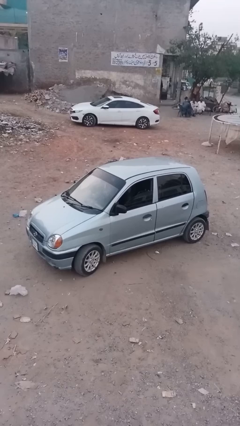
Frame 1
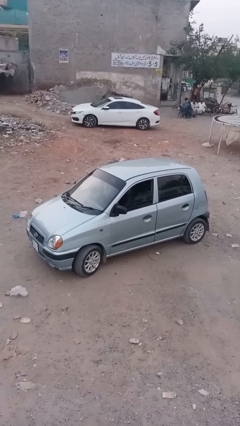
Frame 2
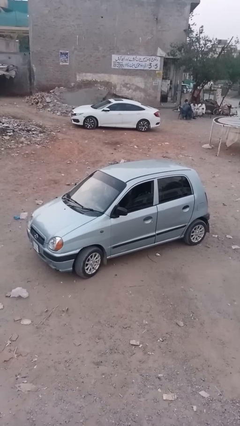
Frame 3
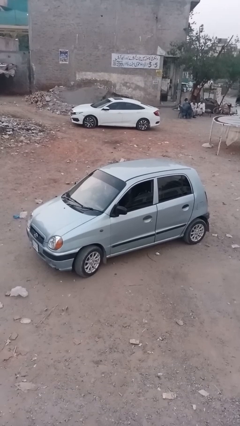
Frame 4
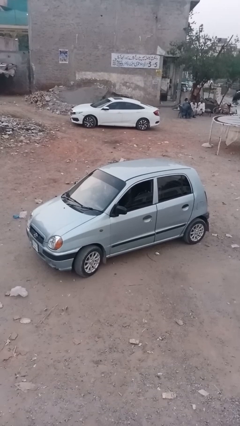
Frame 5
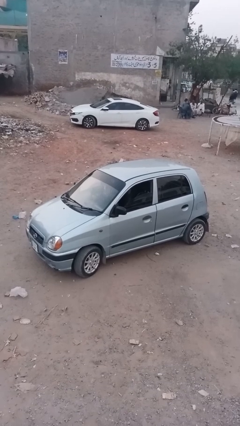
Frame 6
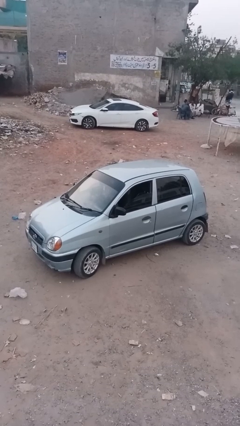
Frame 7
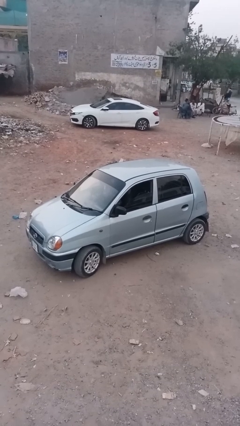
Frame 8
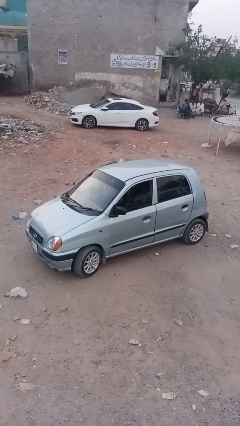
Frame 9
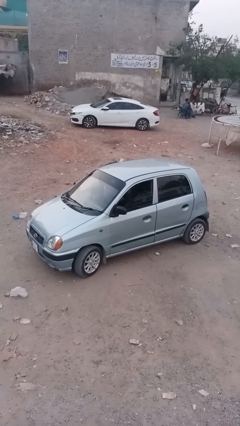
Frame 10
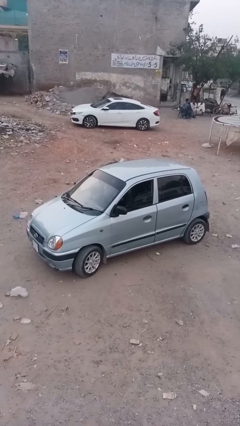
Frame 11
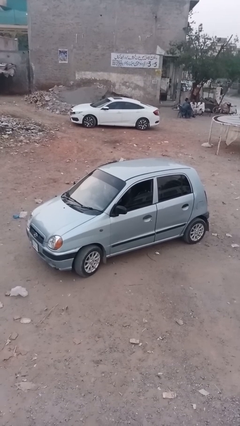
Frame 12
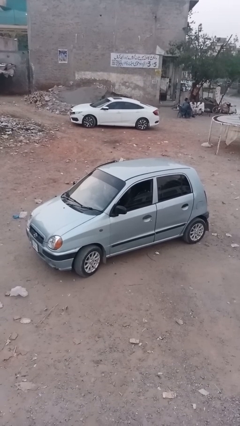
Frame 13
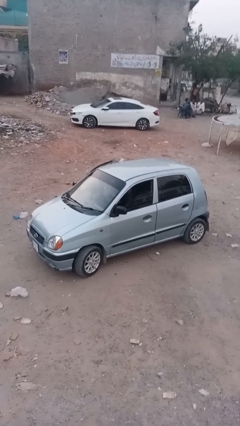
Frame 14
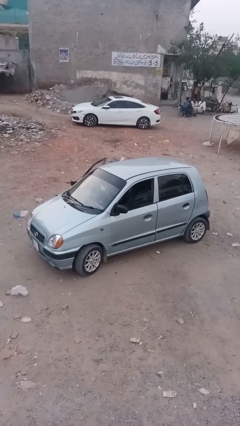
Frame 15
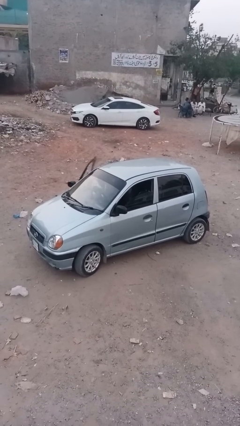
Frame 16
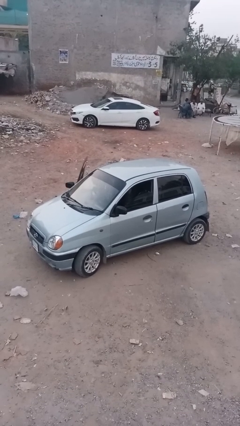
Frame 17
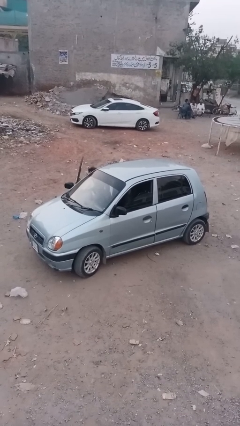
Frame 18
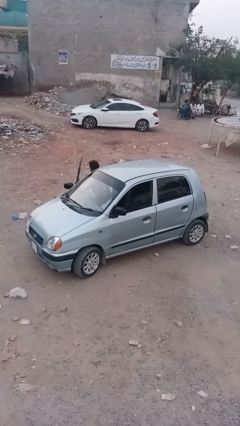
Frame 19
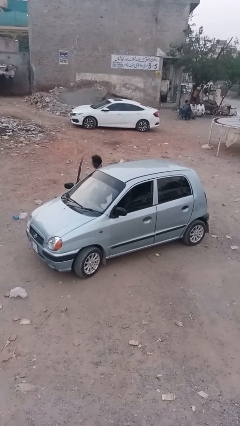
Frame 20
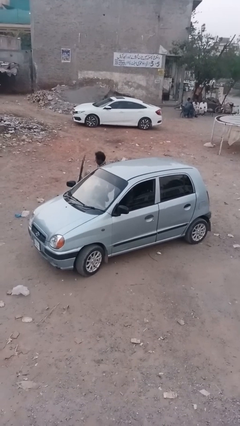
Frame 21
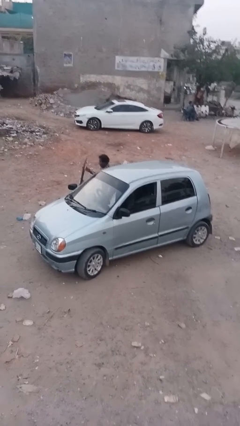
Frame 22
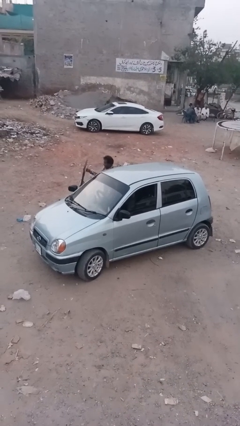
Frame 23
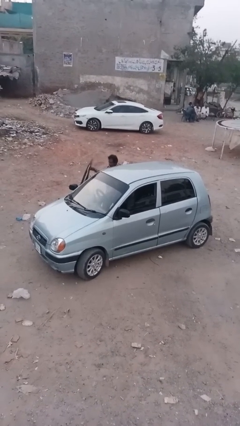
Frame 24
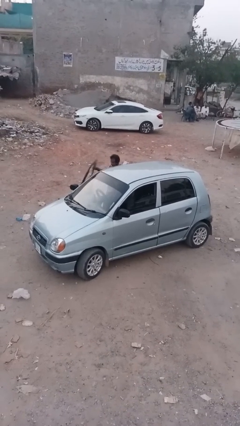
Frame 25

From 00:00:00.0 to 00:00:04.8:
car drops off person

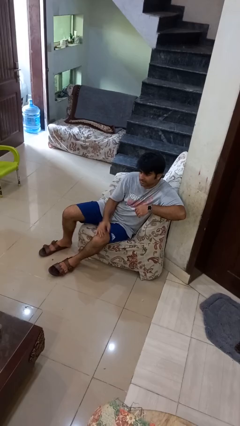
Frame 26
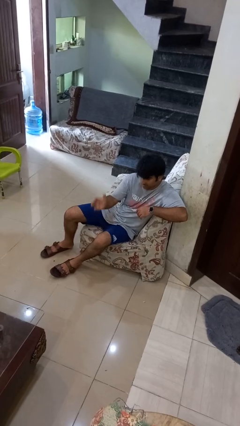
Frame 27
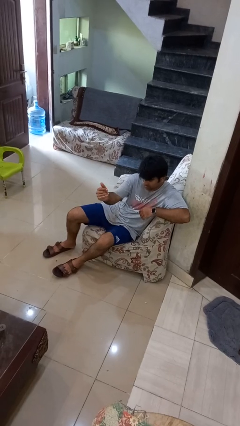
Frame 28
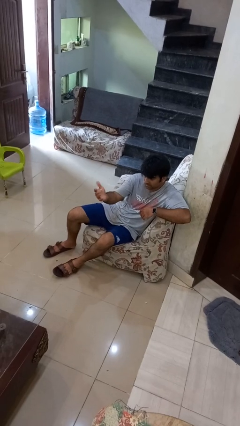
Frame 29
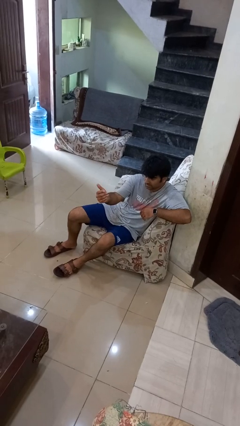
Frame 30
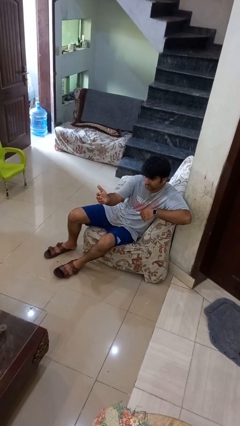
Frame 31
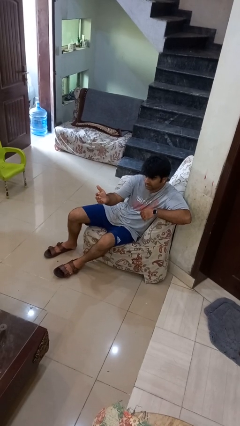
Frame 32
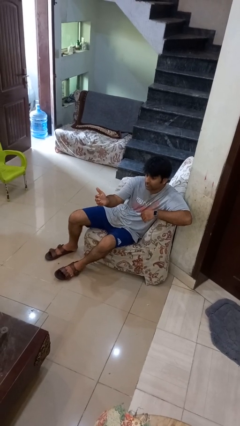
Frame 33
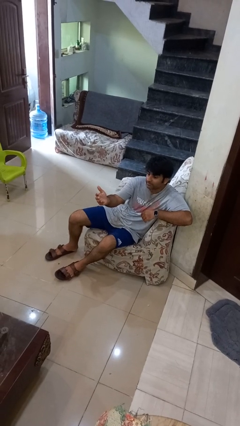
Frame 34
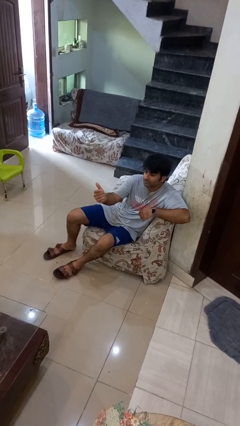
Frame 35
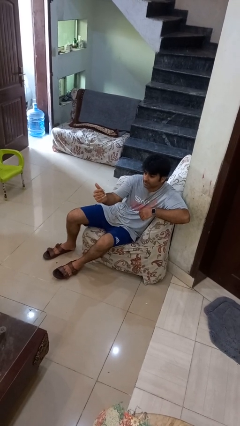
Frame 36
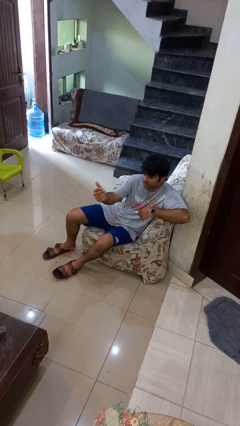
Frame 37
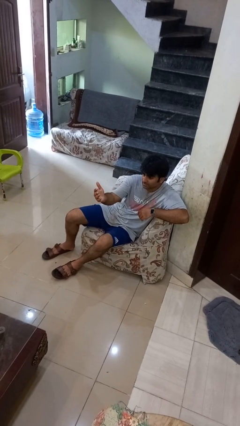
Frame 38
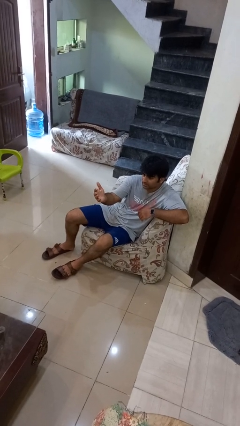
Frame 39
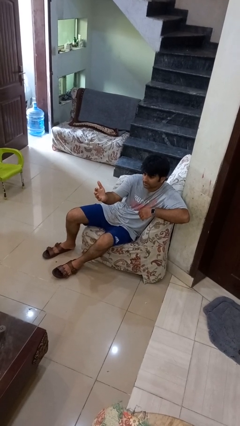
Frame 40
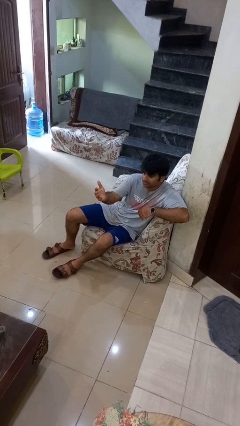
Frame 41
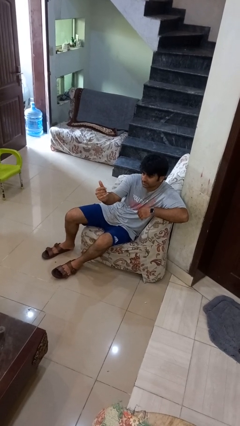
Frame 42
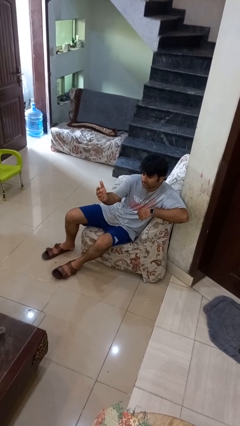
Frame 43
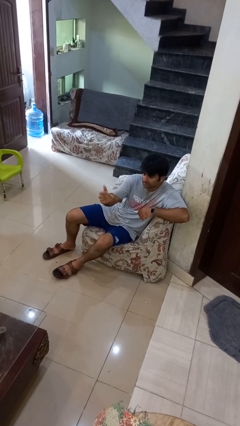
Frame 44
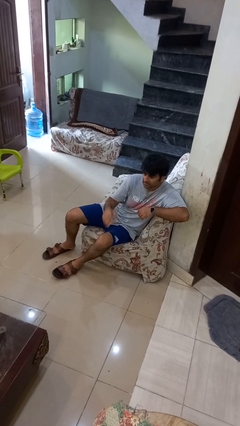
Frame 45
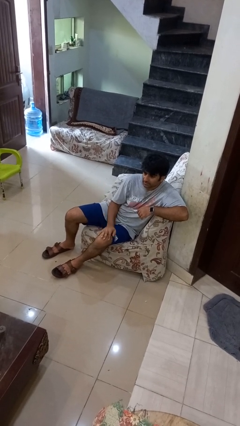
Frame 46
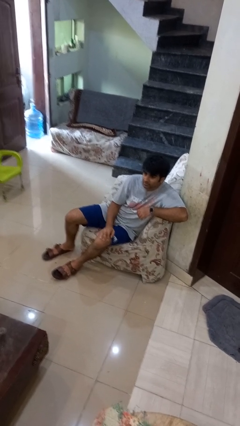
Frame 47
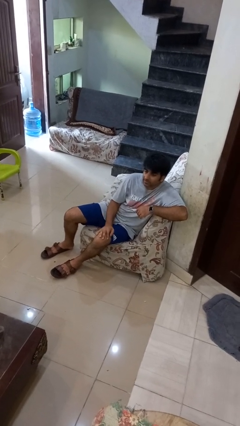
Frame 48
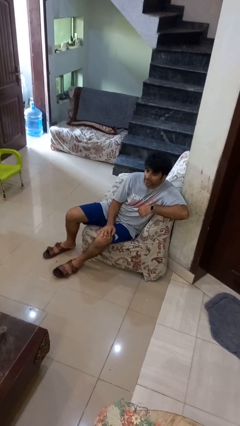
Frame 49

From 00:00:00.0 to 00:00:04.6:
person gestures come here

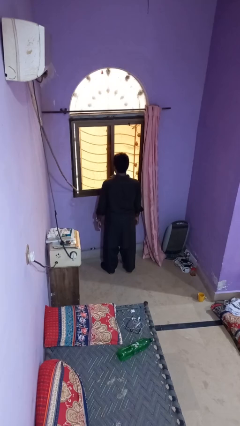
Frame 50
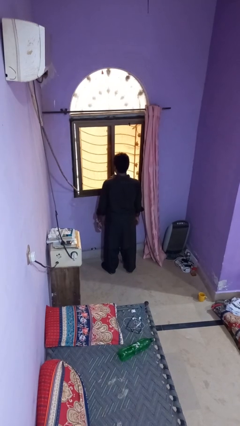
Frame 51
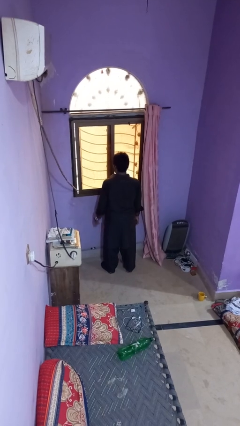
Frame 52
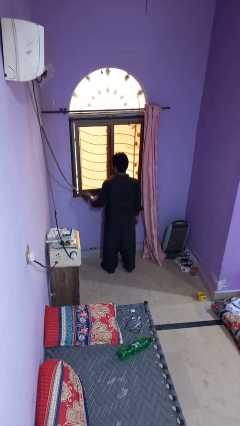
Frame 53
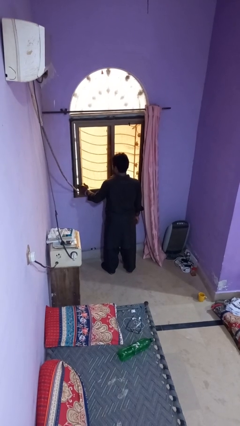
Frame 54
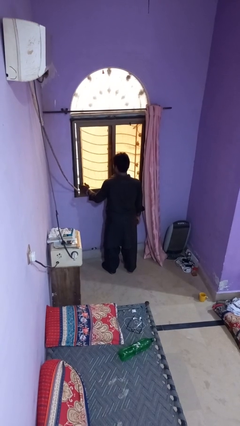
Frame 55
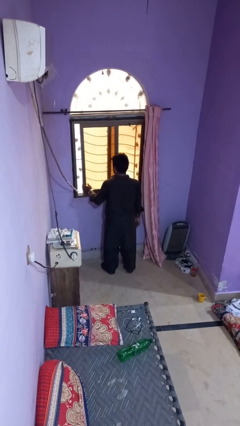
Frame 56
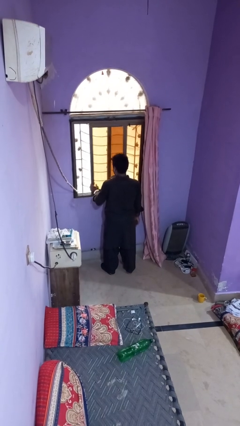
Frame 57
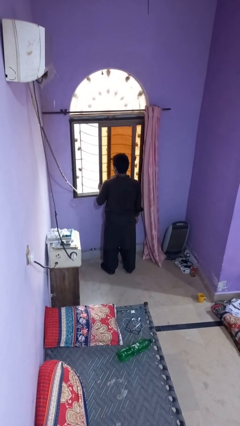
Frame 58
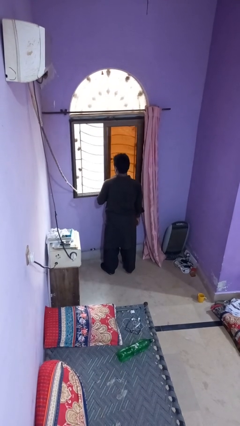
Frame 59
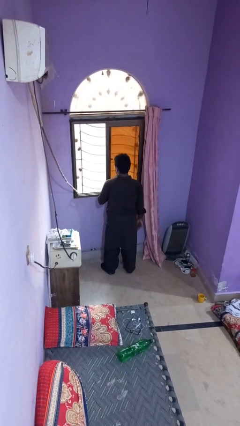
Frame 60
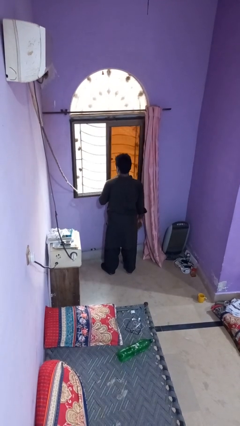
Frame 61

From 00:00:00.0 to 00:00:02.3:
person opens home window

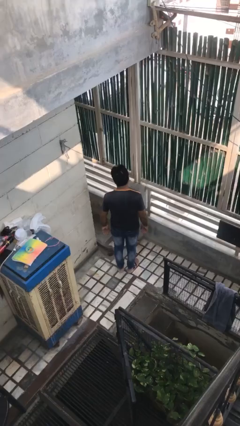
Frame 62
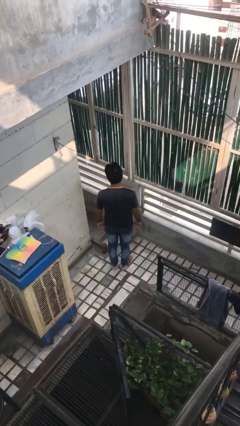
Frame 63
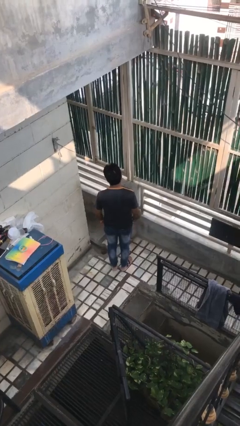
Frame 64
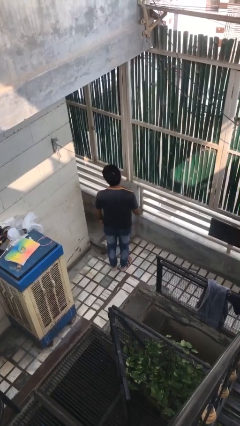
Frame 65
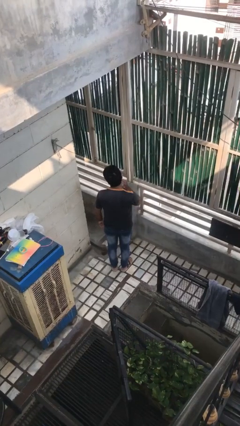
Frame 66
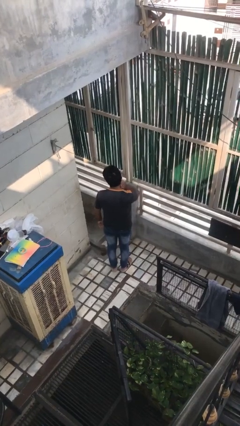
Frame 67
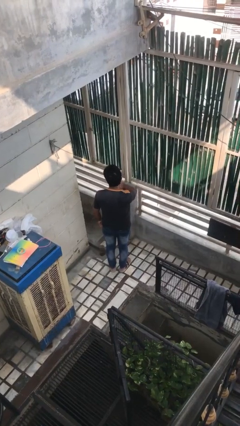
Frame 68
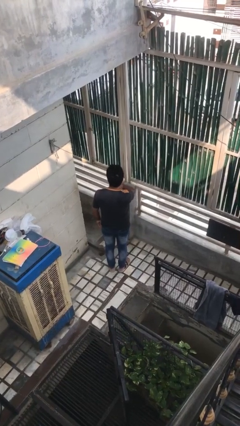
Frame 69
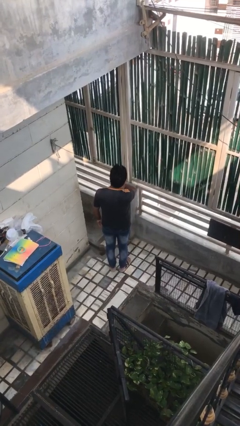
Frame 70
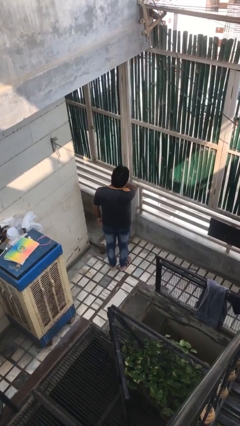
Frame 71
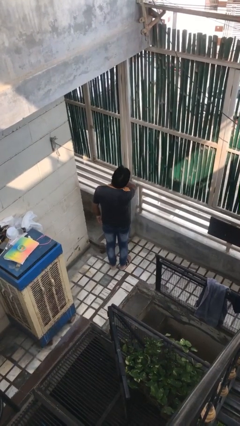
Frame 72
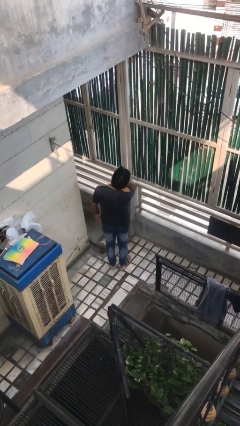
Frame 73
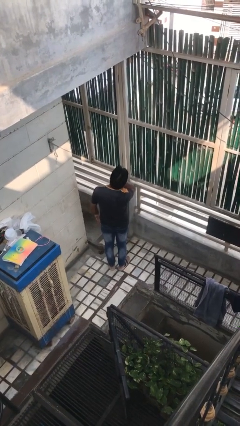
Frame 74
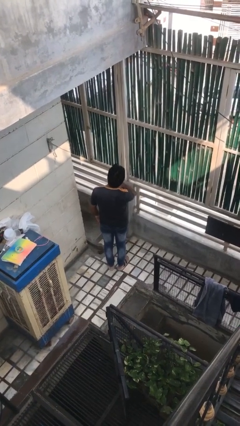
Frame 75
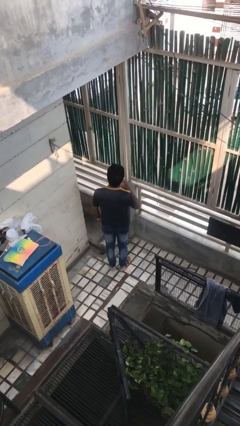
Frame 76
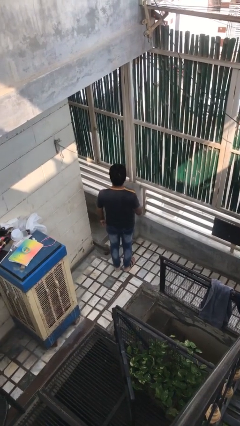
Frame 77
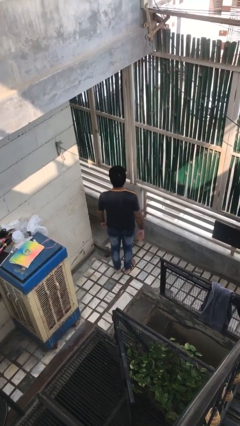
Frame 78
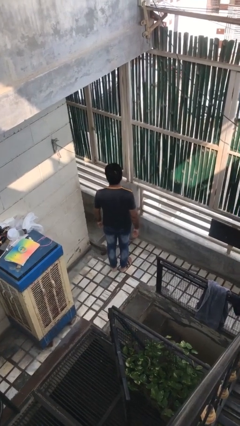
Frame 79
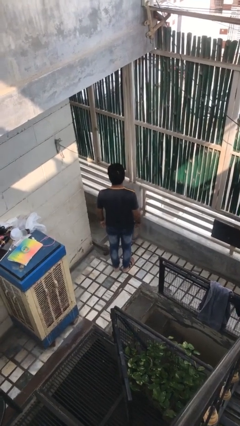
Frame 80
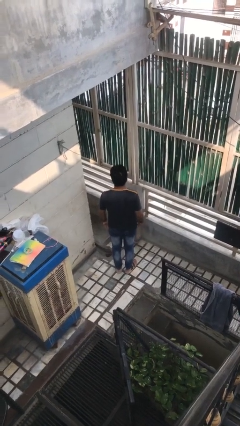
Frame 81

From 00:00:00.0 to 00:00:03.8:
person rubs neck

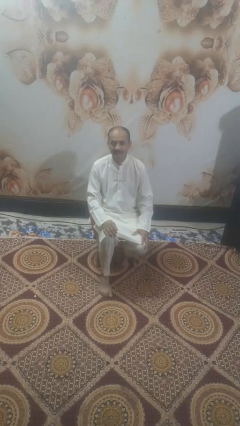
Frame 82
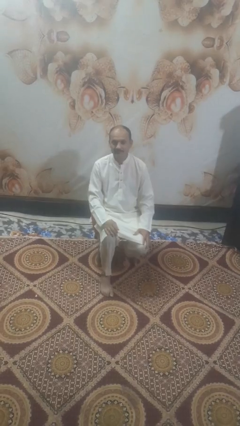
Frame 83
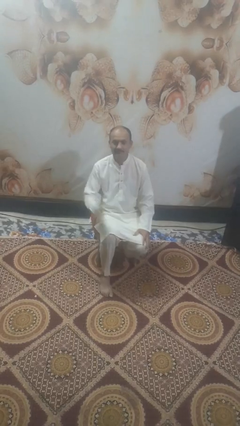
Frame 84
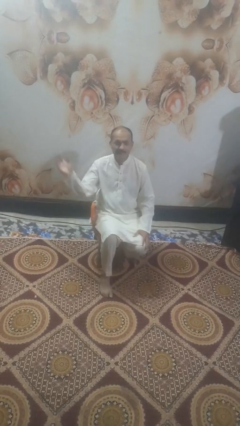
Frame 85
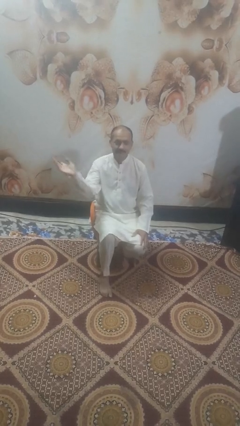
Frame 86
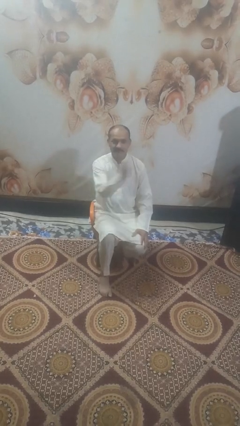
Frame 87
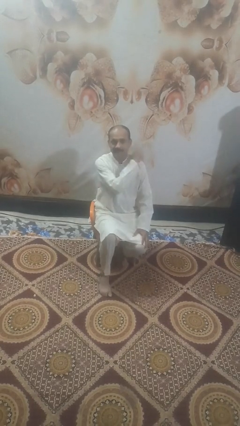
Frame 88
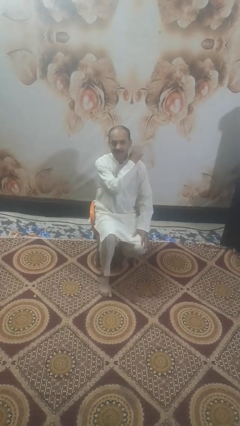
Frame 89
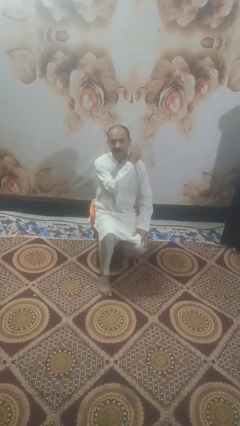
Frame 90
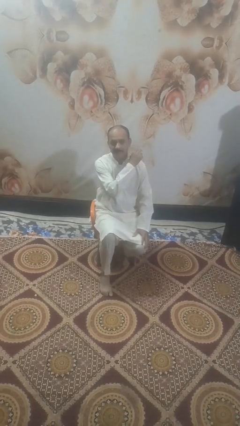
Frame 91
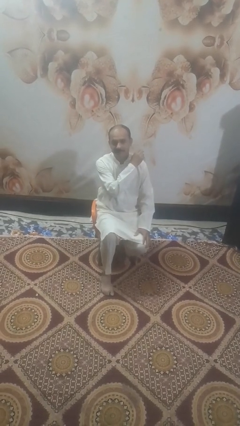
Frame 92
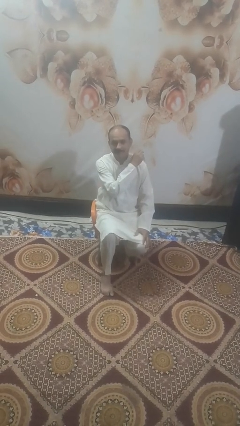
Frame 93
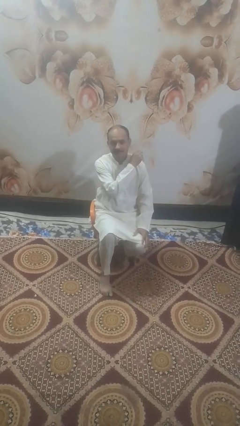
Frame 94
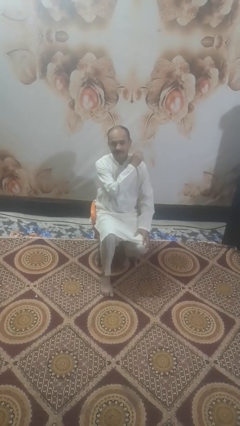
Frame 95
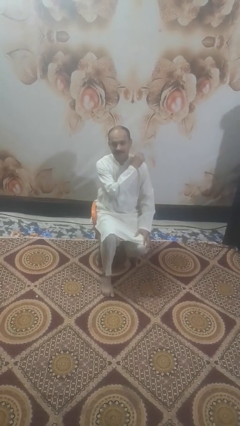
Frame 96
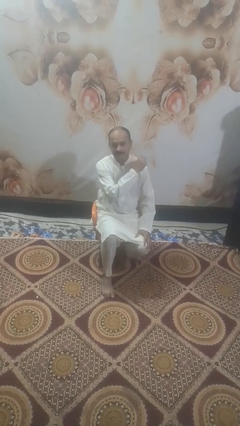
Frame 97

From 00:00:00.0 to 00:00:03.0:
person gestures swipe left
